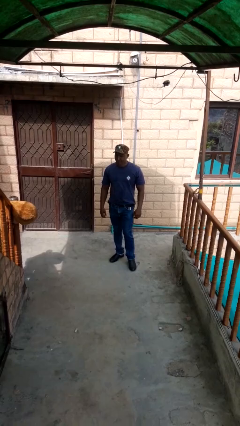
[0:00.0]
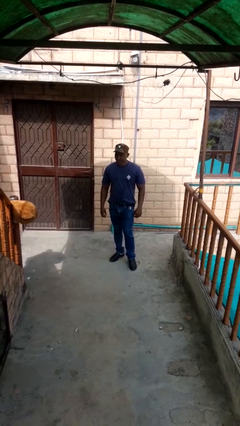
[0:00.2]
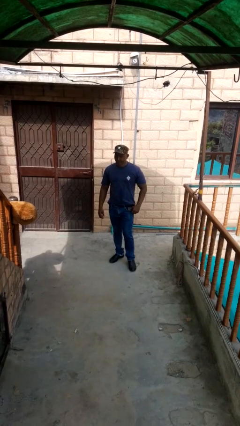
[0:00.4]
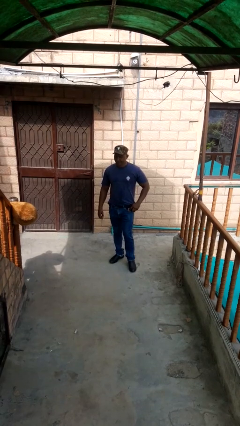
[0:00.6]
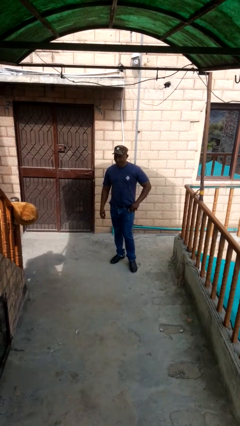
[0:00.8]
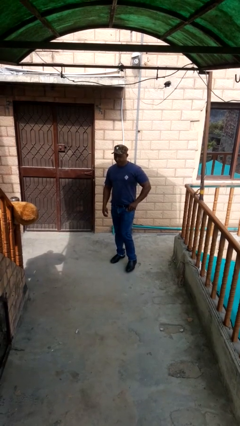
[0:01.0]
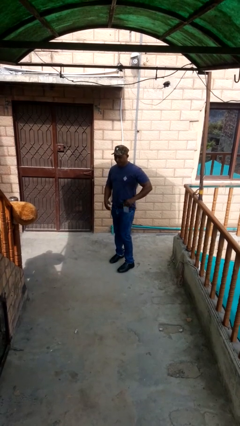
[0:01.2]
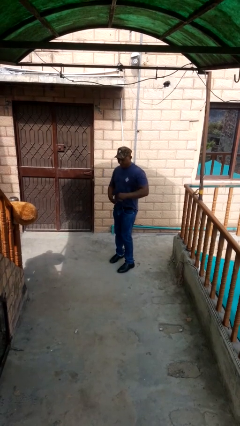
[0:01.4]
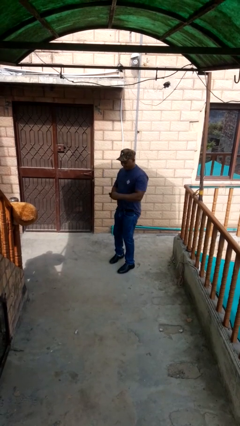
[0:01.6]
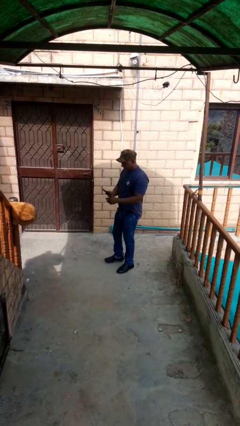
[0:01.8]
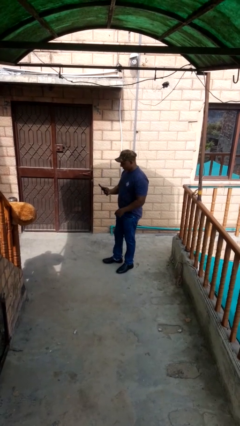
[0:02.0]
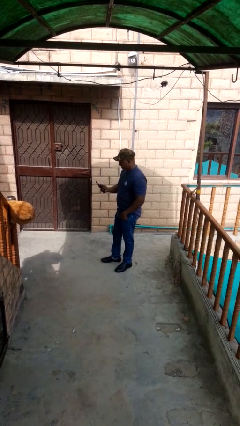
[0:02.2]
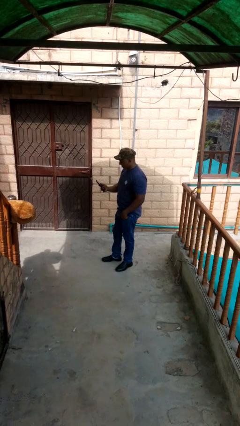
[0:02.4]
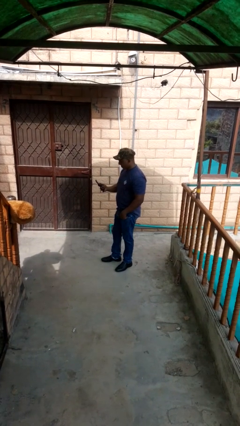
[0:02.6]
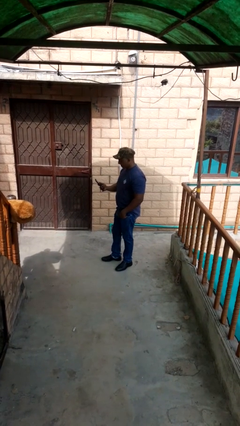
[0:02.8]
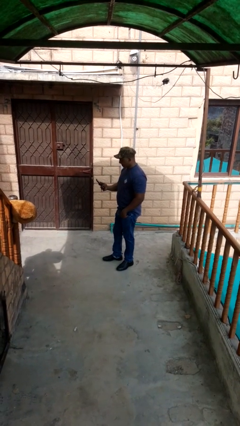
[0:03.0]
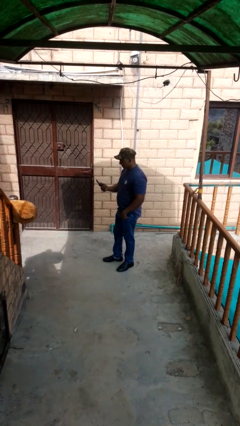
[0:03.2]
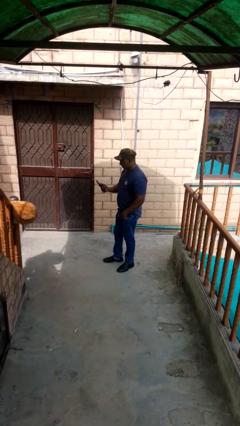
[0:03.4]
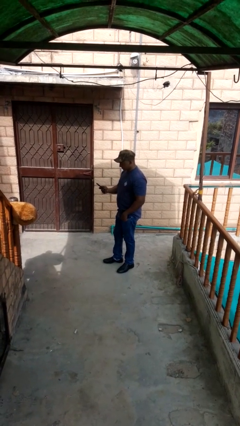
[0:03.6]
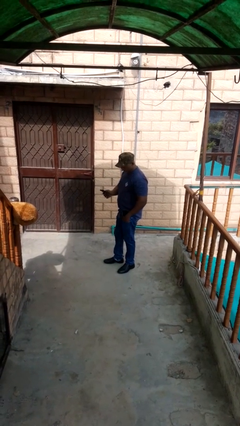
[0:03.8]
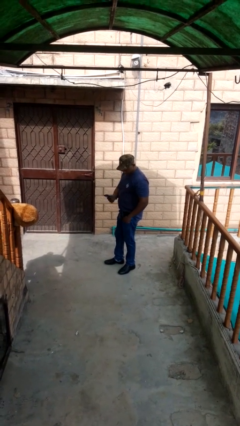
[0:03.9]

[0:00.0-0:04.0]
person takes phone from pocket

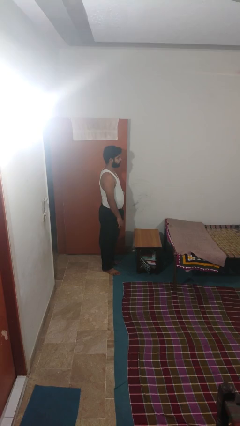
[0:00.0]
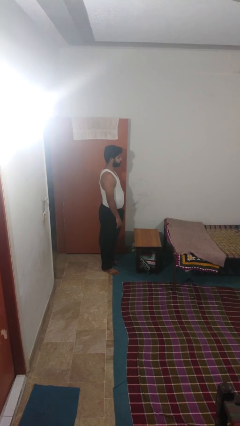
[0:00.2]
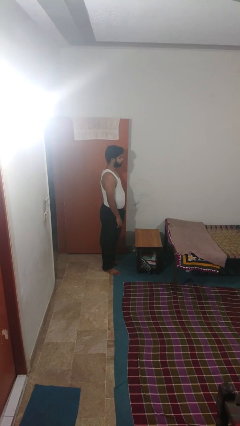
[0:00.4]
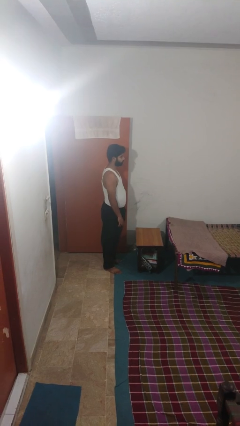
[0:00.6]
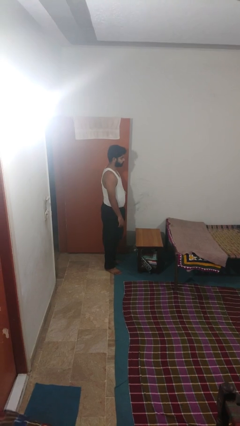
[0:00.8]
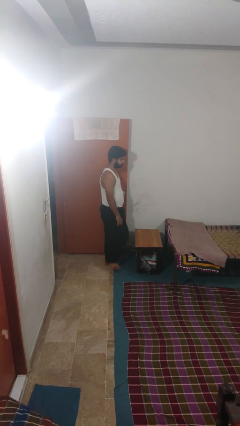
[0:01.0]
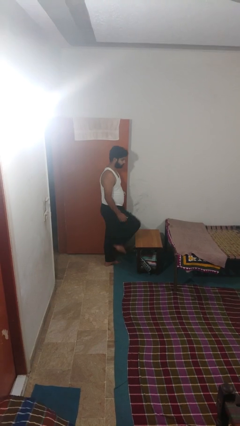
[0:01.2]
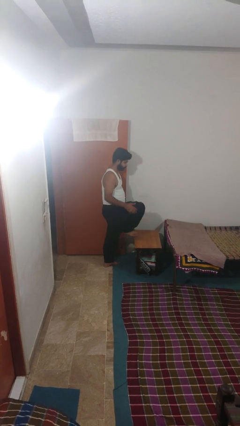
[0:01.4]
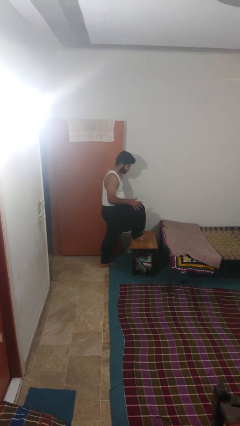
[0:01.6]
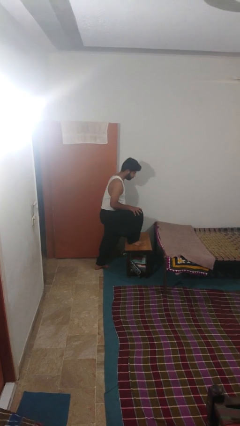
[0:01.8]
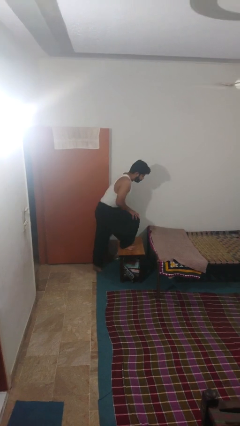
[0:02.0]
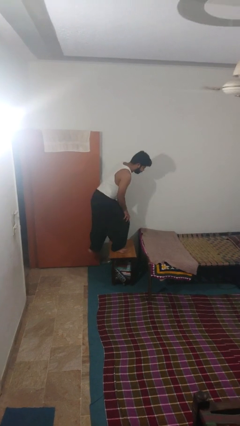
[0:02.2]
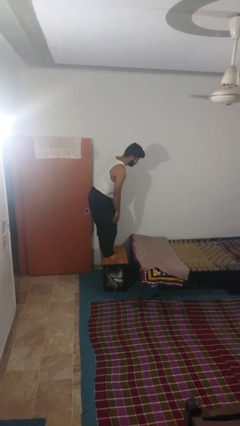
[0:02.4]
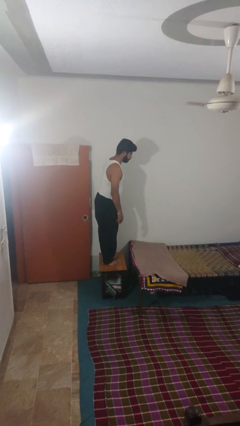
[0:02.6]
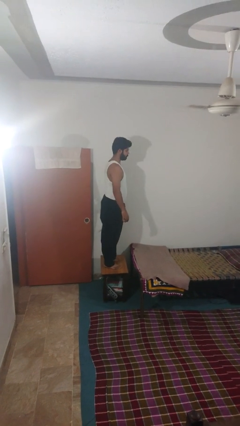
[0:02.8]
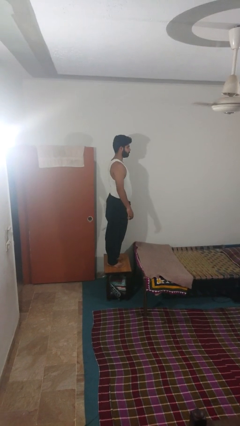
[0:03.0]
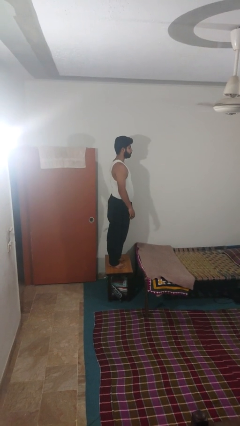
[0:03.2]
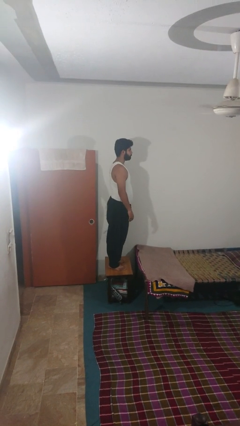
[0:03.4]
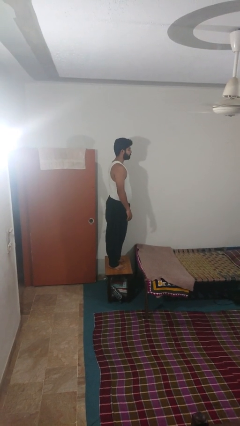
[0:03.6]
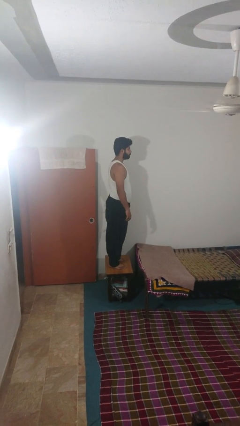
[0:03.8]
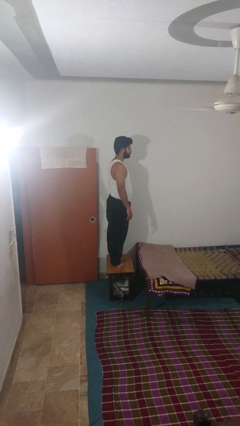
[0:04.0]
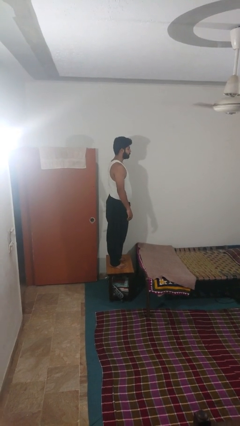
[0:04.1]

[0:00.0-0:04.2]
person climbs on table

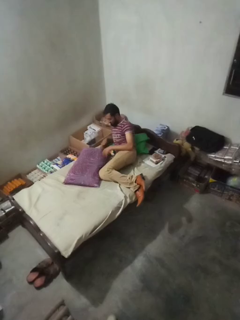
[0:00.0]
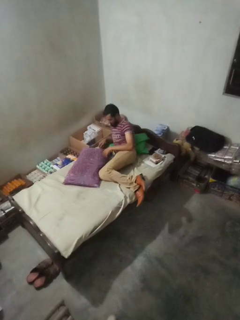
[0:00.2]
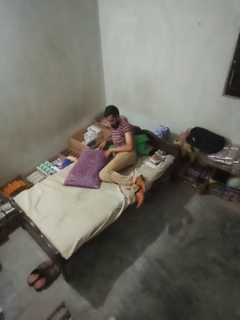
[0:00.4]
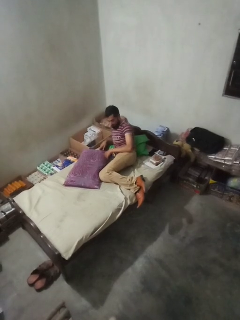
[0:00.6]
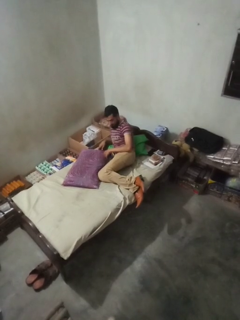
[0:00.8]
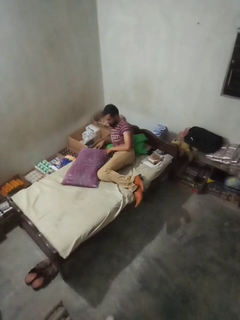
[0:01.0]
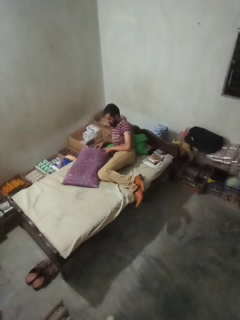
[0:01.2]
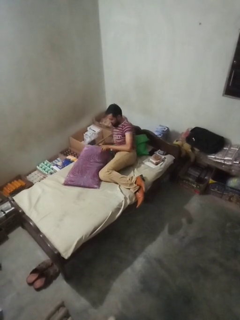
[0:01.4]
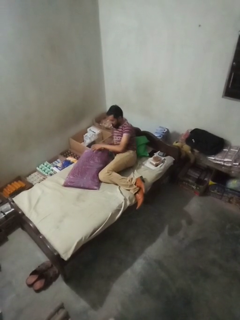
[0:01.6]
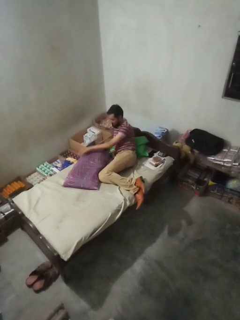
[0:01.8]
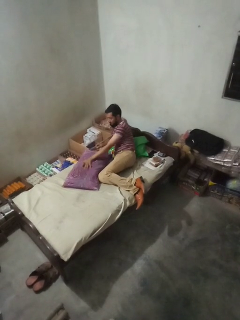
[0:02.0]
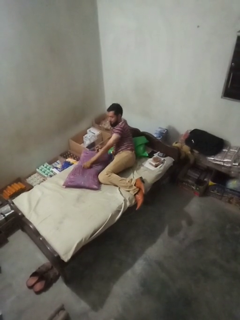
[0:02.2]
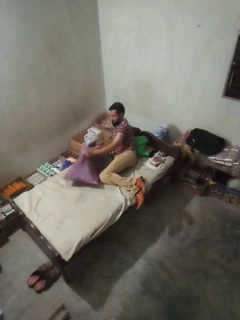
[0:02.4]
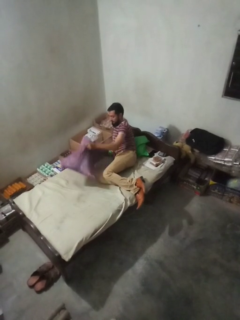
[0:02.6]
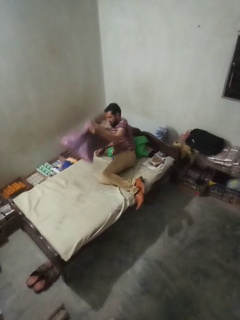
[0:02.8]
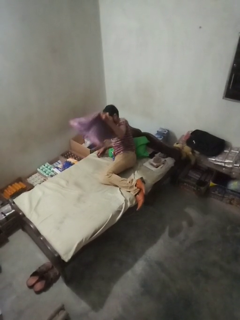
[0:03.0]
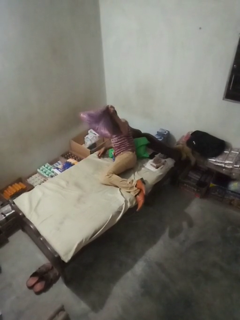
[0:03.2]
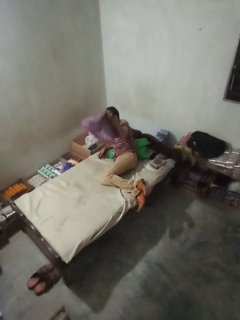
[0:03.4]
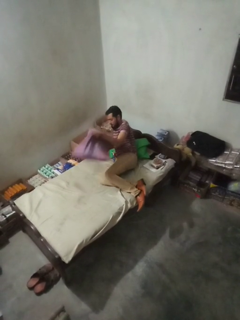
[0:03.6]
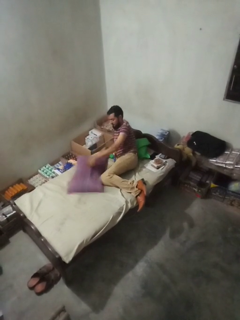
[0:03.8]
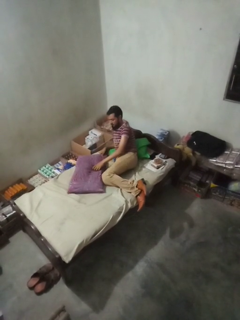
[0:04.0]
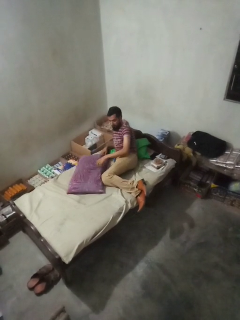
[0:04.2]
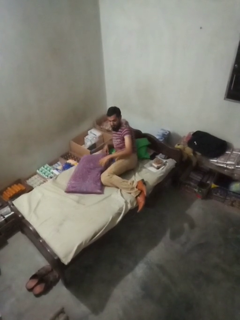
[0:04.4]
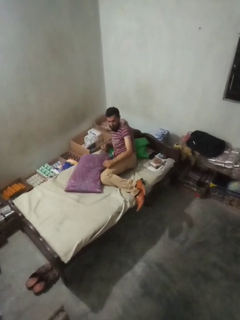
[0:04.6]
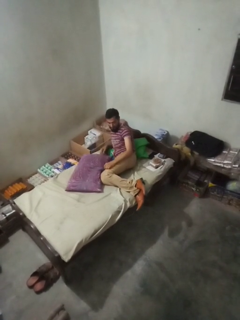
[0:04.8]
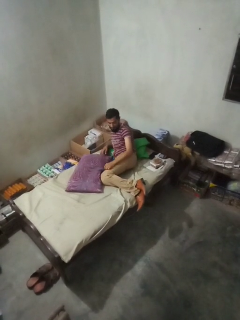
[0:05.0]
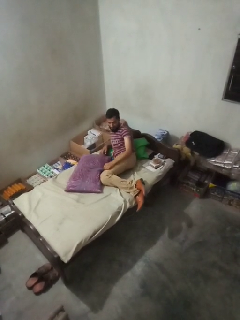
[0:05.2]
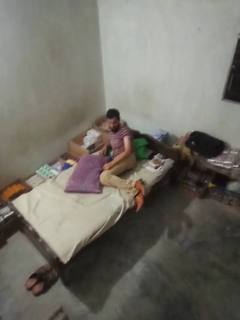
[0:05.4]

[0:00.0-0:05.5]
person searches under bed

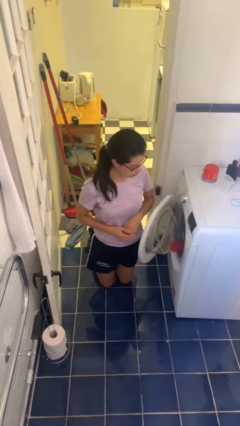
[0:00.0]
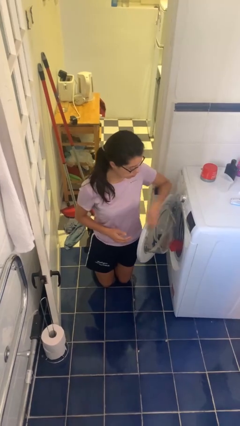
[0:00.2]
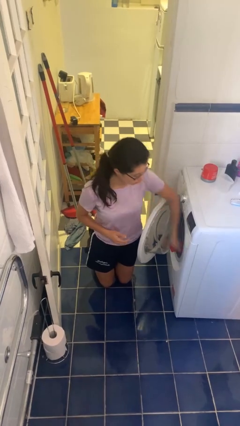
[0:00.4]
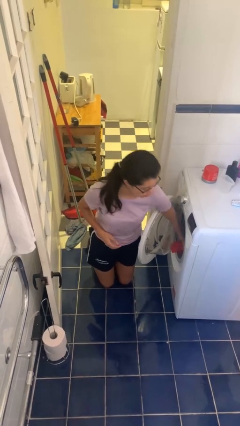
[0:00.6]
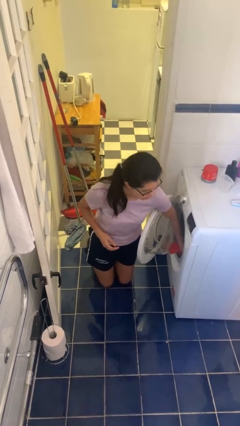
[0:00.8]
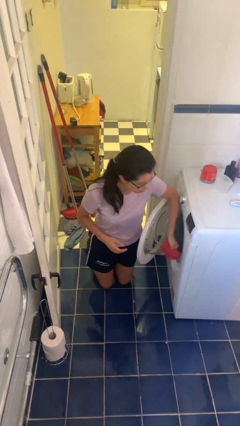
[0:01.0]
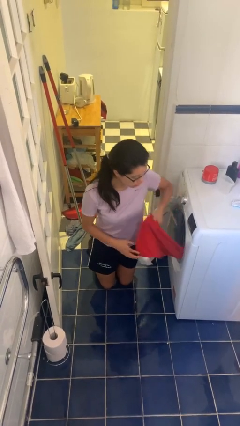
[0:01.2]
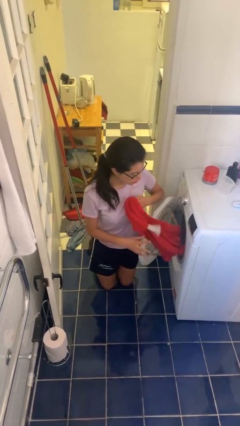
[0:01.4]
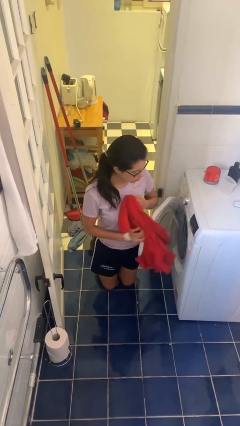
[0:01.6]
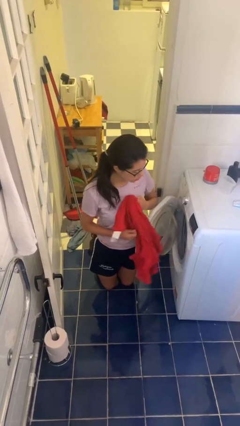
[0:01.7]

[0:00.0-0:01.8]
person unloads dryer

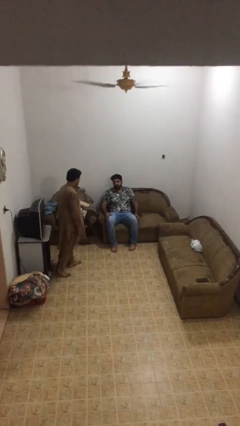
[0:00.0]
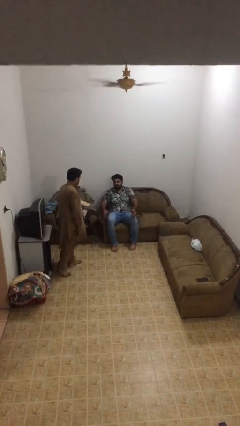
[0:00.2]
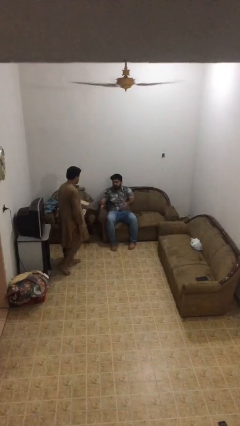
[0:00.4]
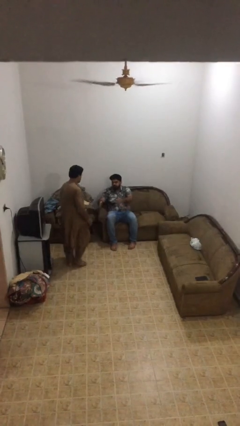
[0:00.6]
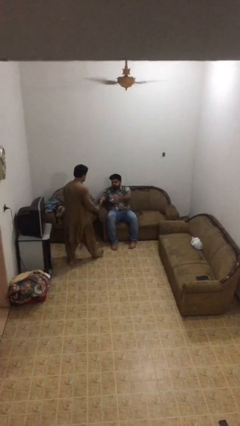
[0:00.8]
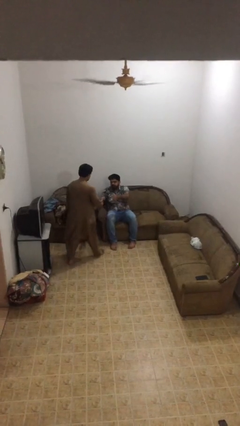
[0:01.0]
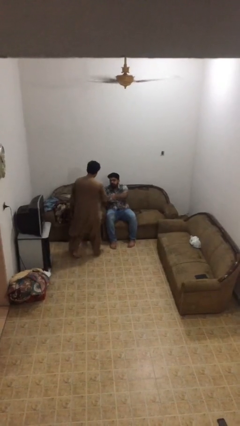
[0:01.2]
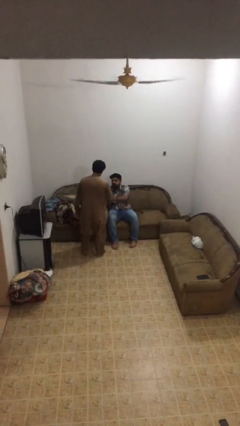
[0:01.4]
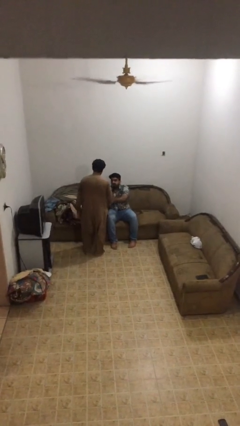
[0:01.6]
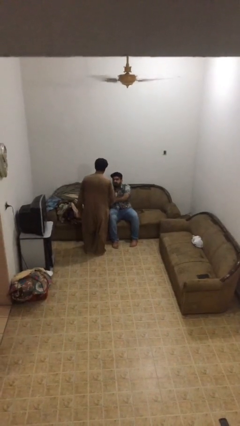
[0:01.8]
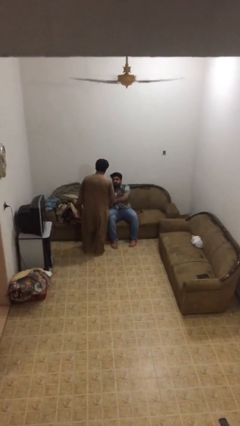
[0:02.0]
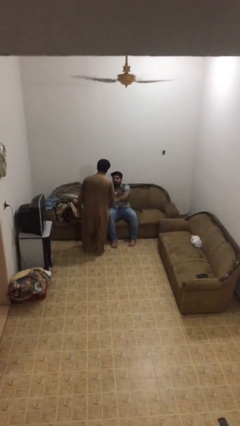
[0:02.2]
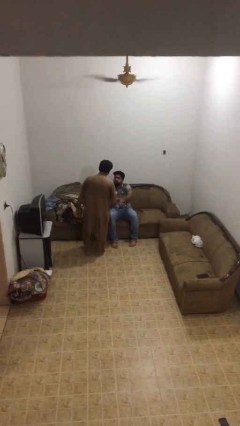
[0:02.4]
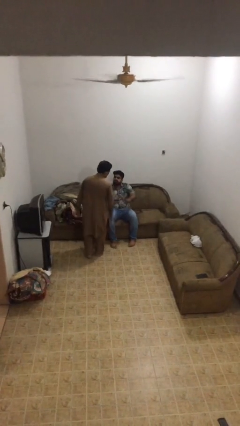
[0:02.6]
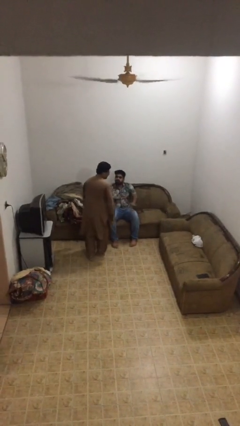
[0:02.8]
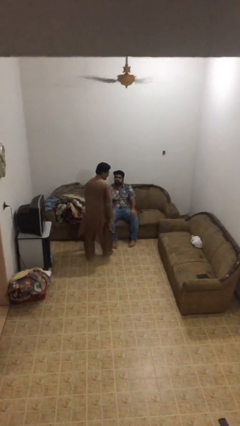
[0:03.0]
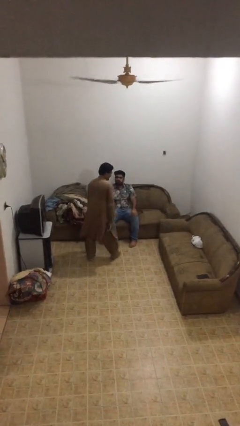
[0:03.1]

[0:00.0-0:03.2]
person shakes hand

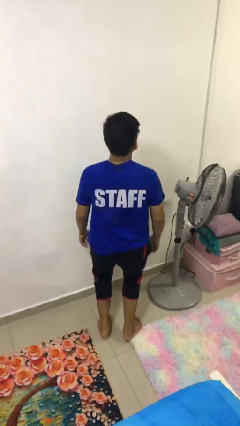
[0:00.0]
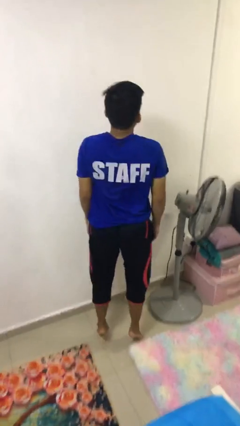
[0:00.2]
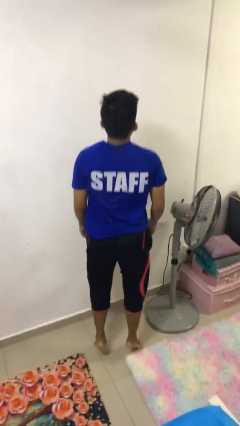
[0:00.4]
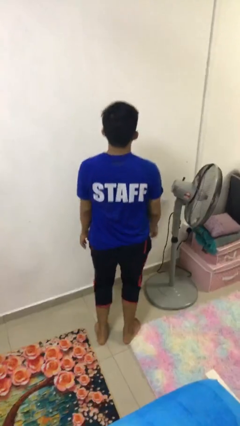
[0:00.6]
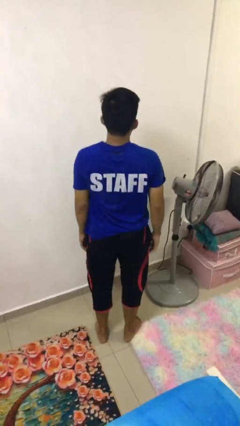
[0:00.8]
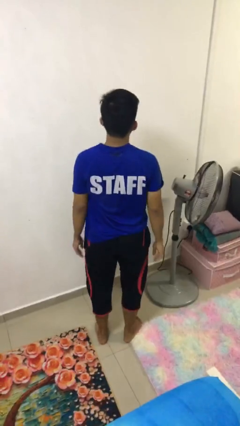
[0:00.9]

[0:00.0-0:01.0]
person jumps
